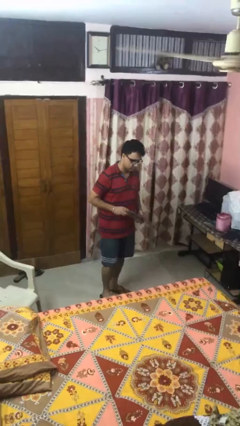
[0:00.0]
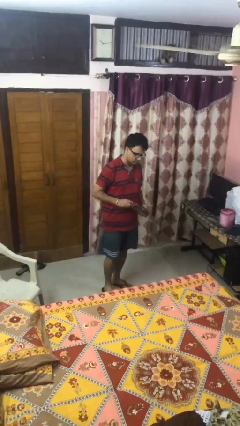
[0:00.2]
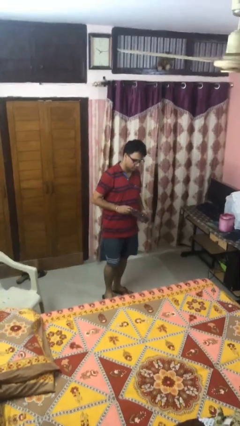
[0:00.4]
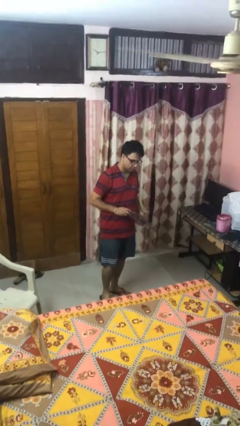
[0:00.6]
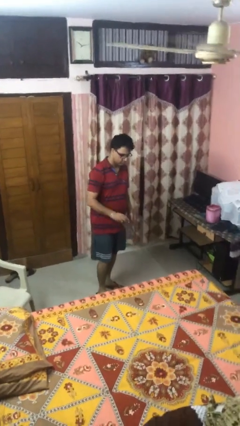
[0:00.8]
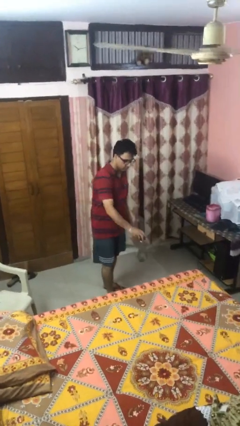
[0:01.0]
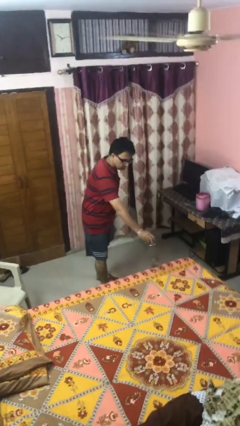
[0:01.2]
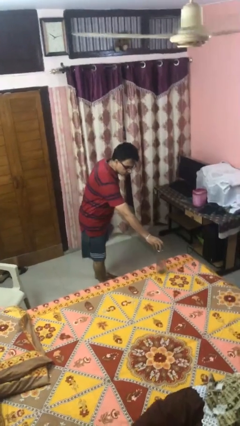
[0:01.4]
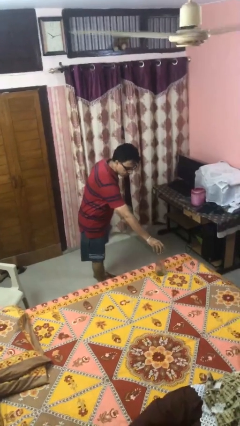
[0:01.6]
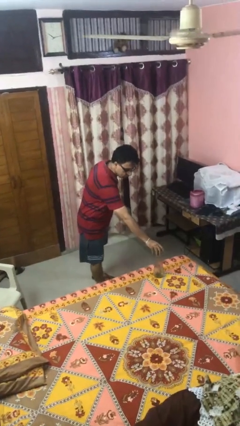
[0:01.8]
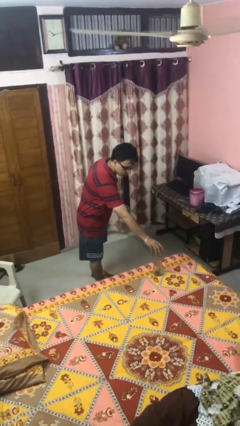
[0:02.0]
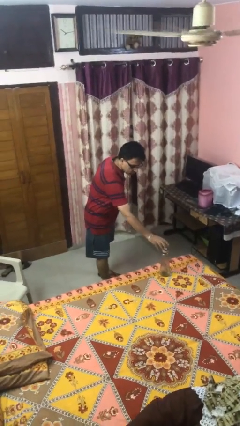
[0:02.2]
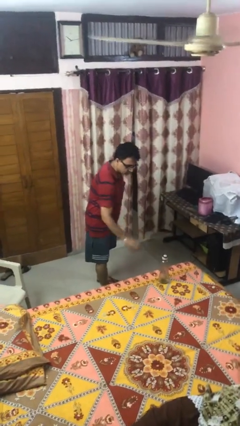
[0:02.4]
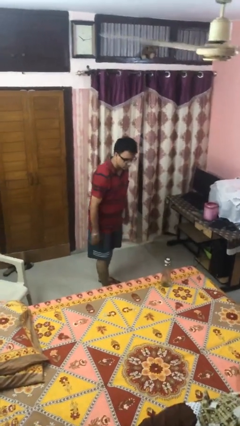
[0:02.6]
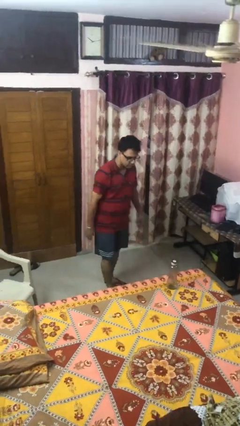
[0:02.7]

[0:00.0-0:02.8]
person puts down object on bed

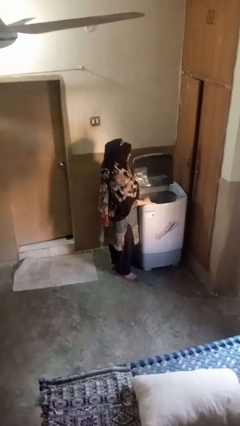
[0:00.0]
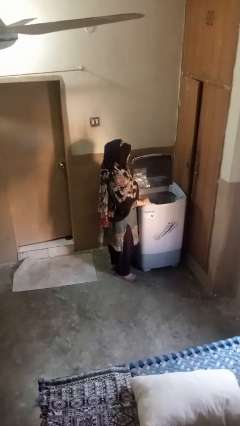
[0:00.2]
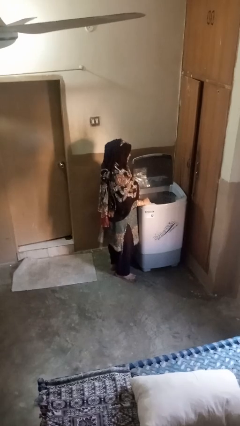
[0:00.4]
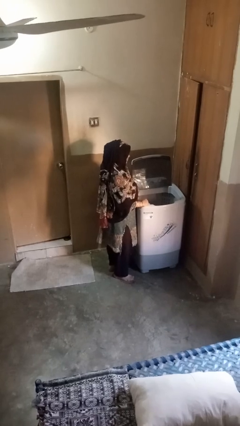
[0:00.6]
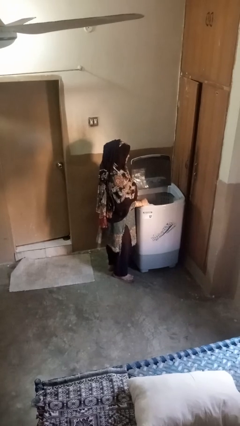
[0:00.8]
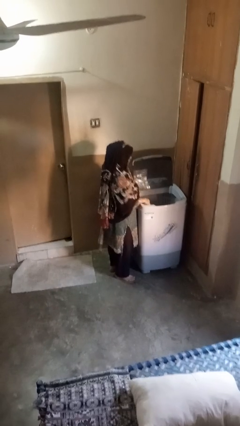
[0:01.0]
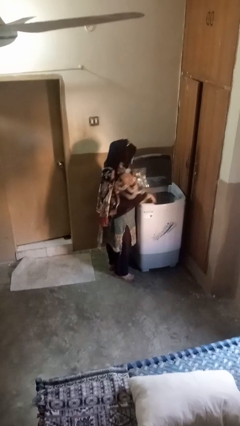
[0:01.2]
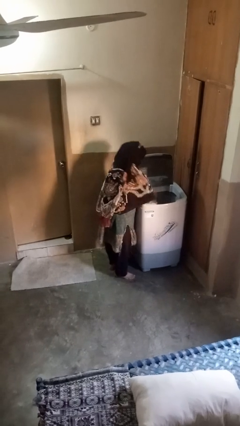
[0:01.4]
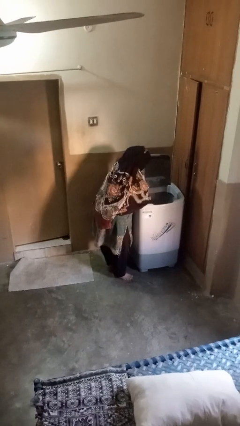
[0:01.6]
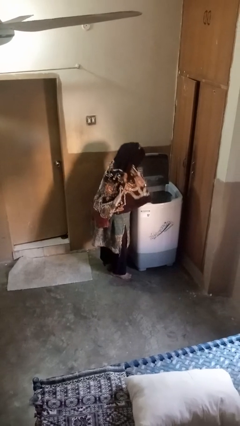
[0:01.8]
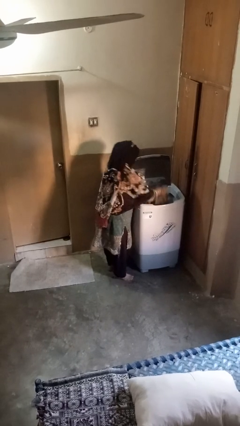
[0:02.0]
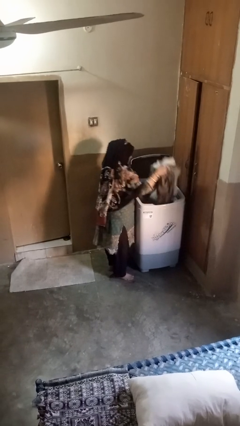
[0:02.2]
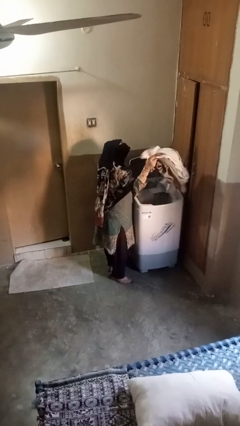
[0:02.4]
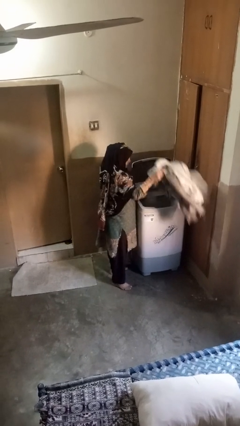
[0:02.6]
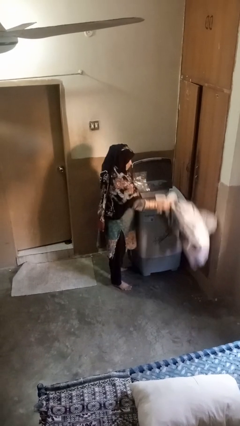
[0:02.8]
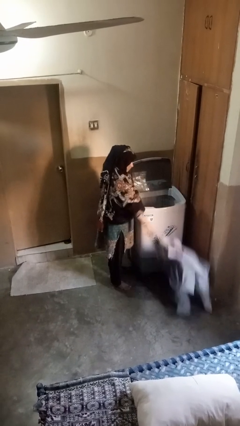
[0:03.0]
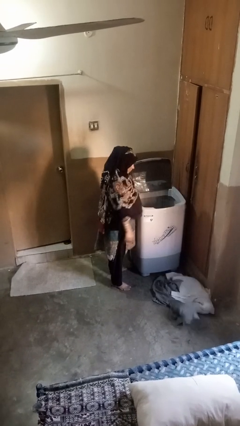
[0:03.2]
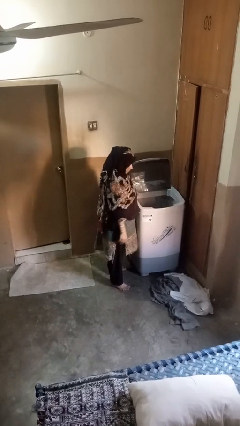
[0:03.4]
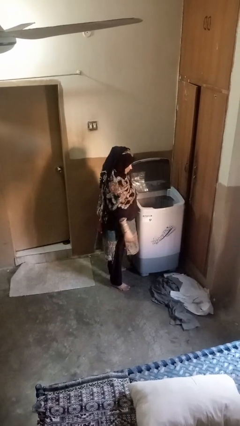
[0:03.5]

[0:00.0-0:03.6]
person unloads clotheswasher

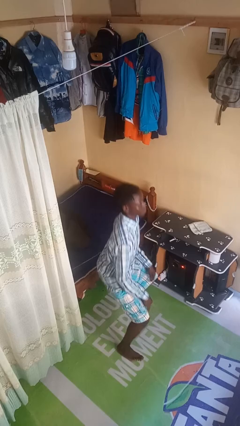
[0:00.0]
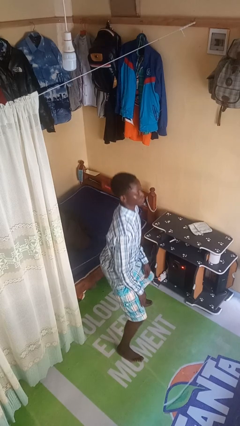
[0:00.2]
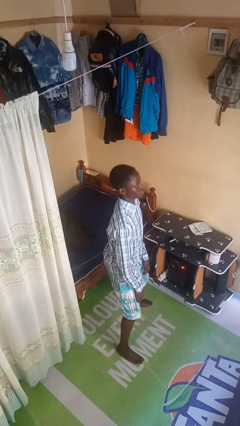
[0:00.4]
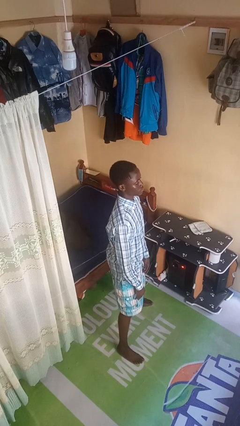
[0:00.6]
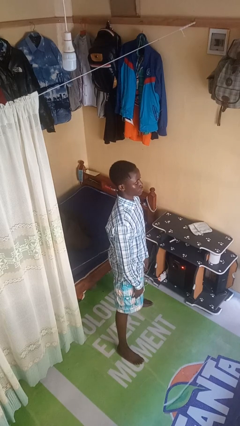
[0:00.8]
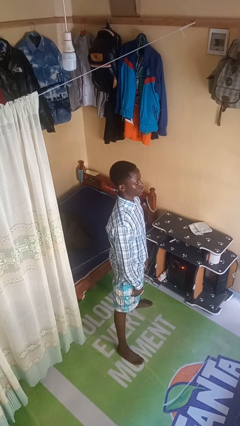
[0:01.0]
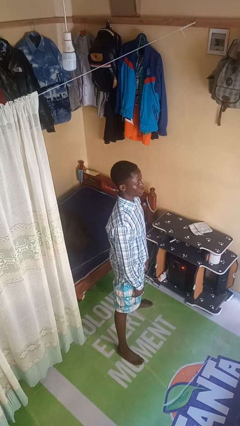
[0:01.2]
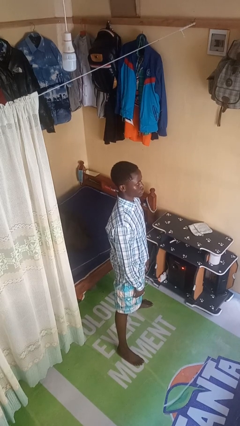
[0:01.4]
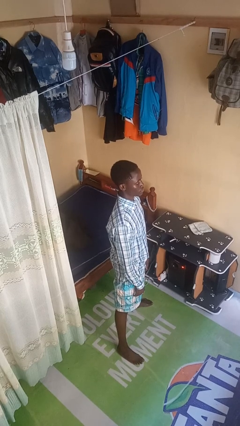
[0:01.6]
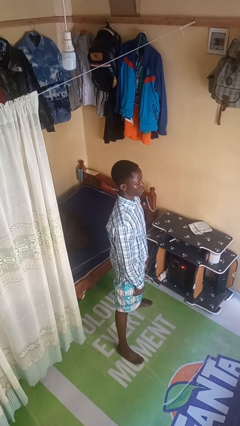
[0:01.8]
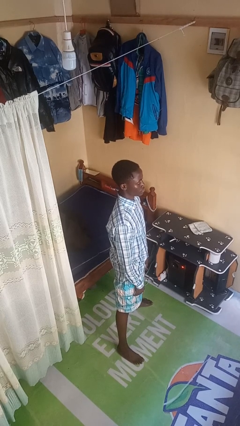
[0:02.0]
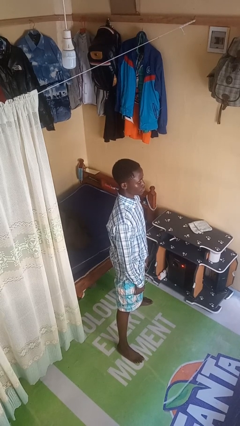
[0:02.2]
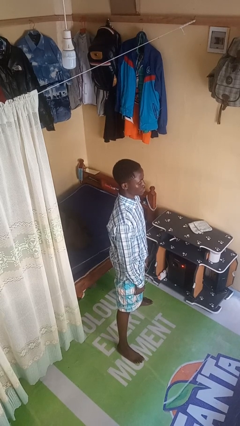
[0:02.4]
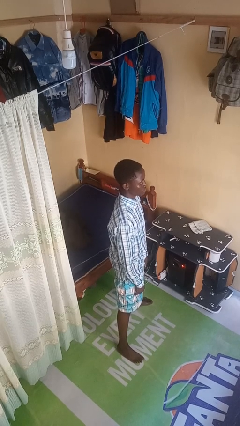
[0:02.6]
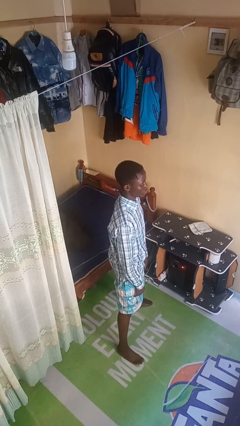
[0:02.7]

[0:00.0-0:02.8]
person stands up

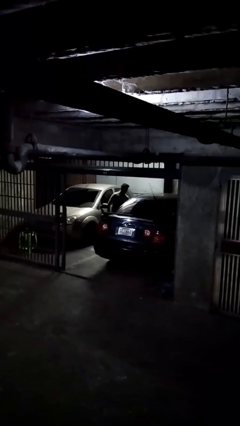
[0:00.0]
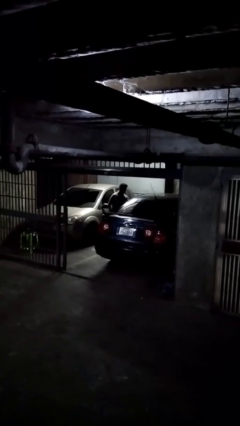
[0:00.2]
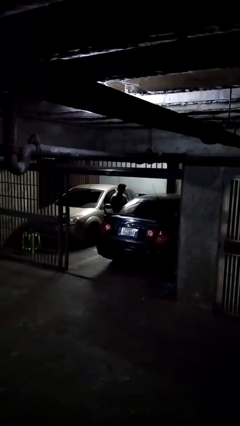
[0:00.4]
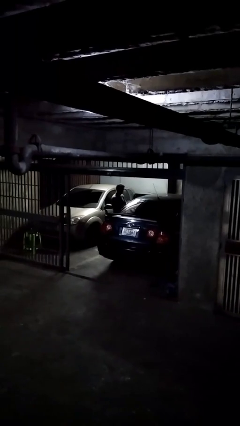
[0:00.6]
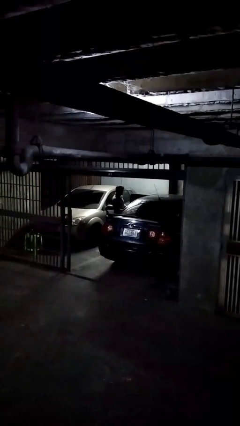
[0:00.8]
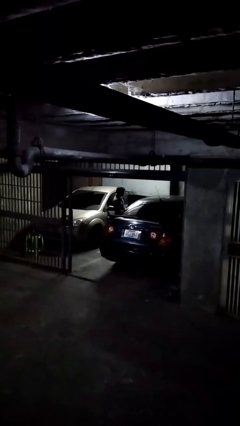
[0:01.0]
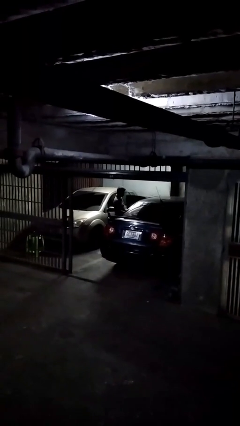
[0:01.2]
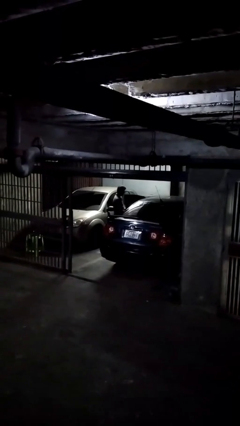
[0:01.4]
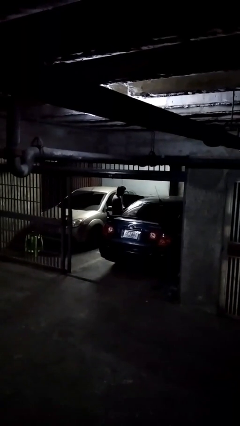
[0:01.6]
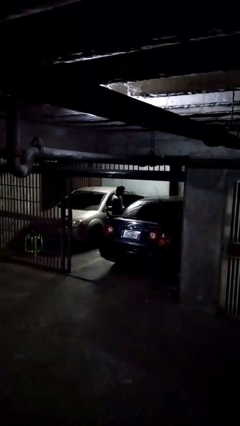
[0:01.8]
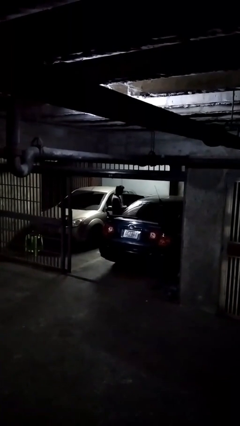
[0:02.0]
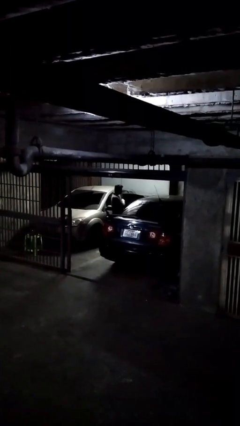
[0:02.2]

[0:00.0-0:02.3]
person opens car door

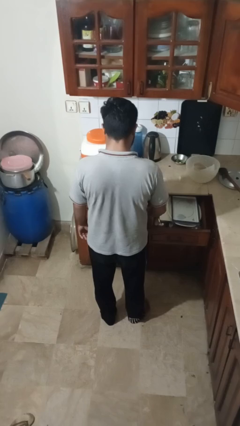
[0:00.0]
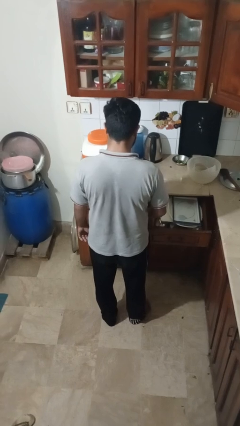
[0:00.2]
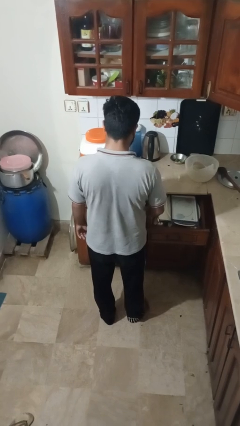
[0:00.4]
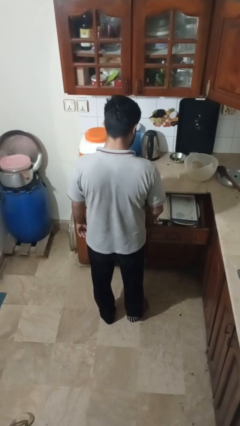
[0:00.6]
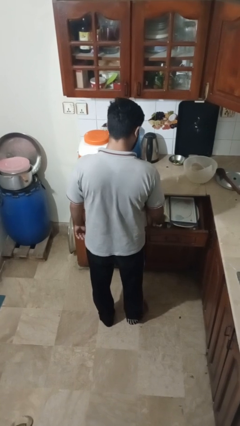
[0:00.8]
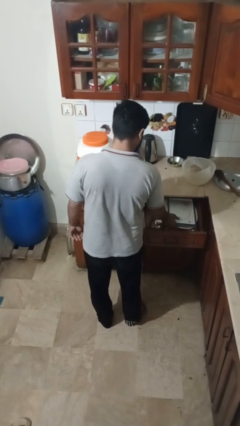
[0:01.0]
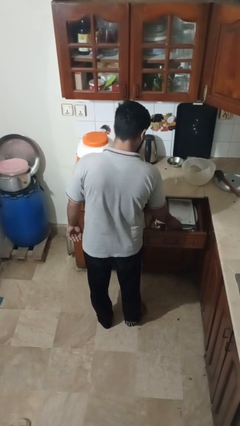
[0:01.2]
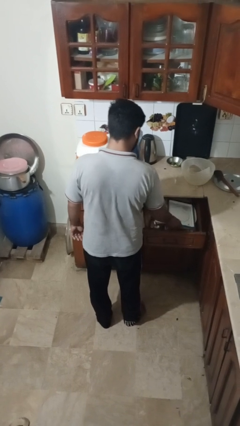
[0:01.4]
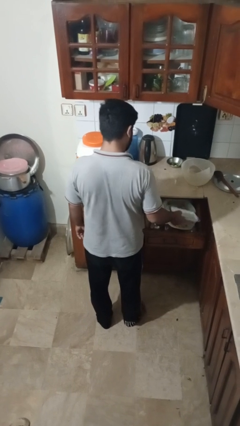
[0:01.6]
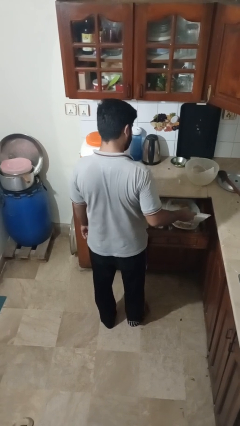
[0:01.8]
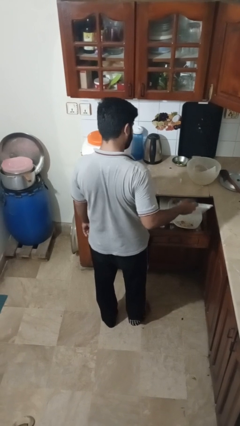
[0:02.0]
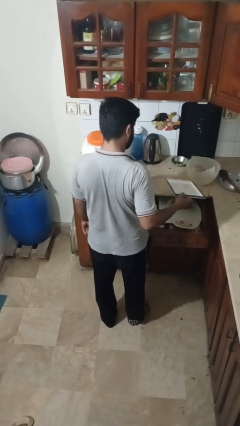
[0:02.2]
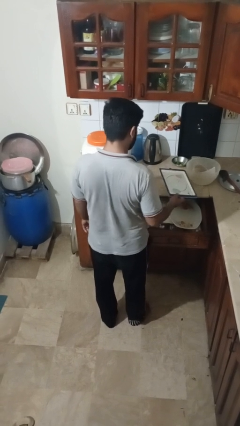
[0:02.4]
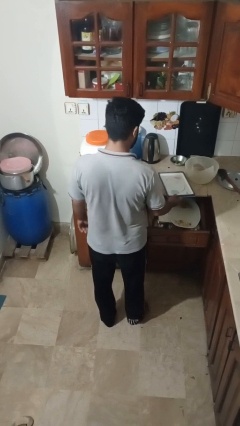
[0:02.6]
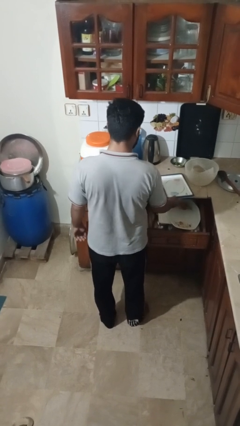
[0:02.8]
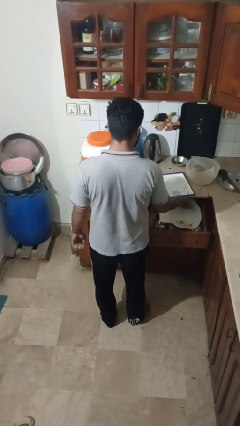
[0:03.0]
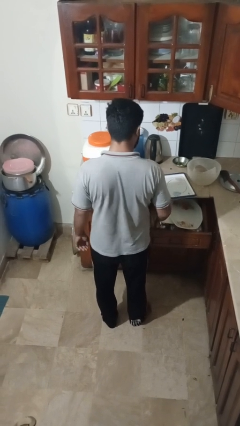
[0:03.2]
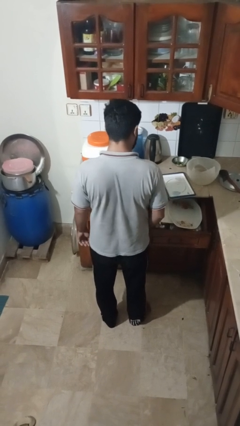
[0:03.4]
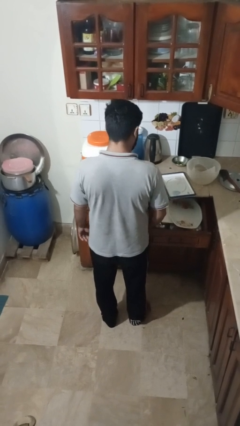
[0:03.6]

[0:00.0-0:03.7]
person takes object from kitchen drawer

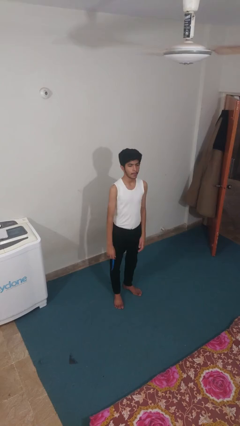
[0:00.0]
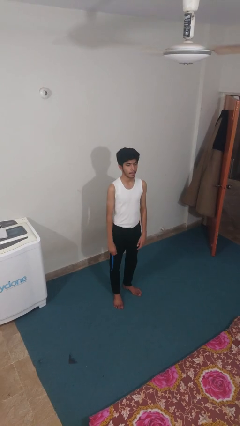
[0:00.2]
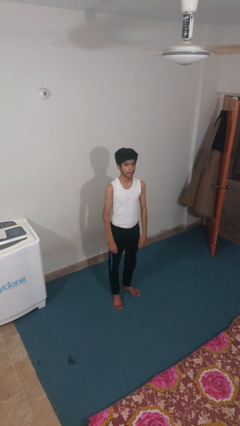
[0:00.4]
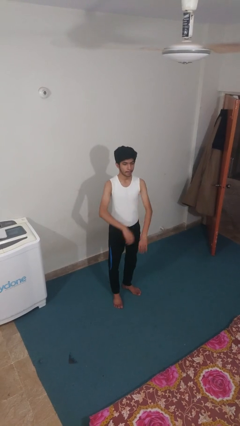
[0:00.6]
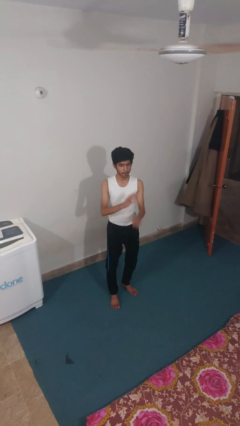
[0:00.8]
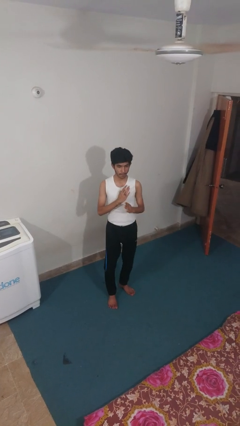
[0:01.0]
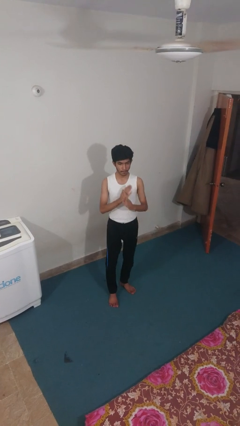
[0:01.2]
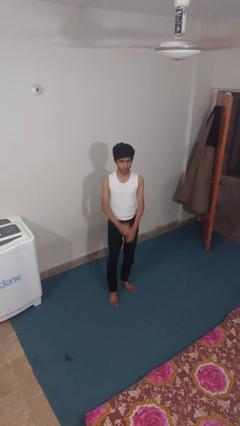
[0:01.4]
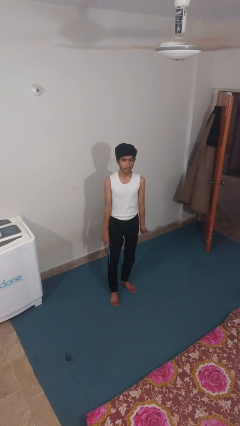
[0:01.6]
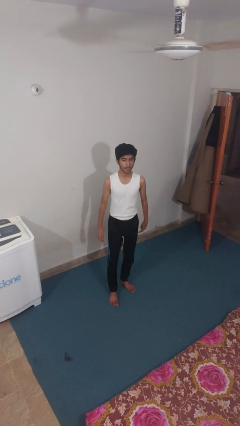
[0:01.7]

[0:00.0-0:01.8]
person karate chop

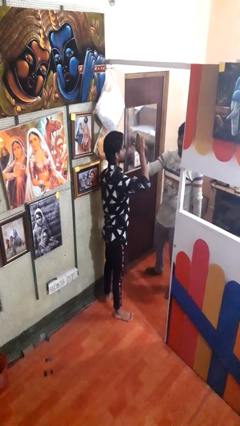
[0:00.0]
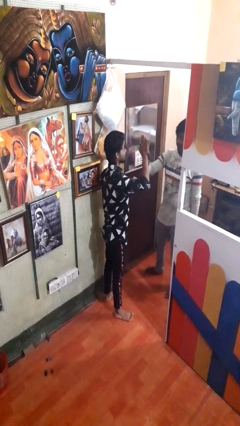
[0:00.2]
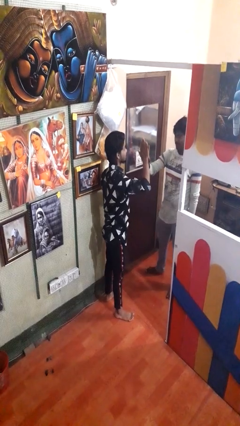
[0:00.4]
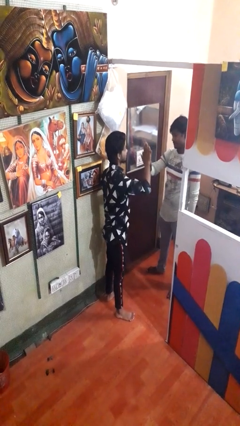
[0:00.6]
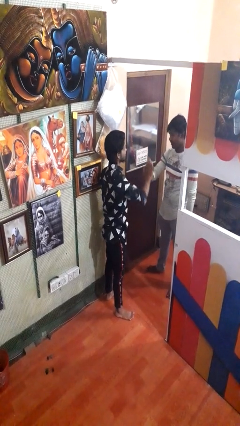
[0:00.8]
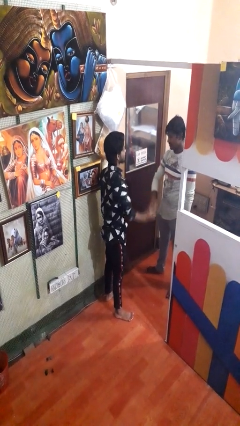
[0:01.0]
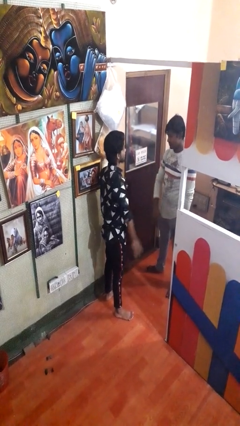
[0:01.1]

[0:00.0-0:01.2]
person highfives hand
